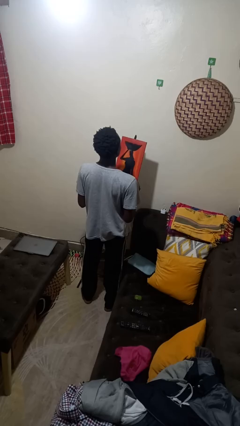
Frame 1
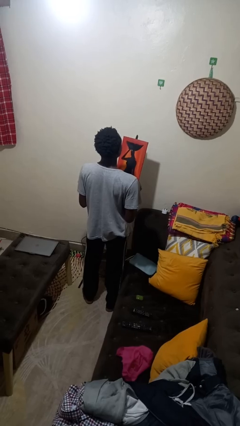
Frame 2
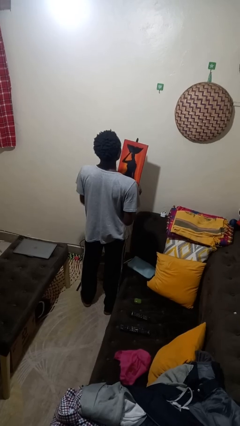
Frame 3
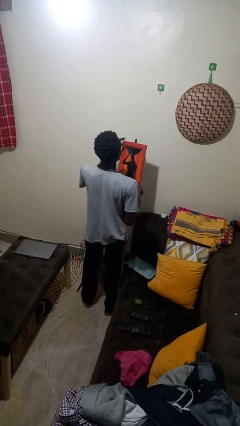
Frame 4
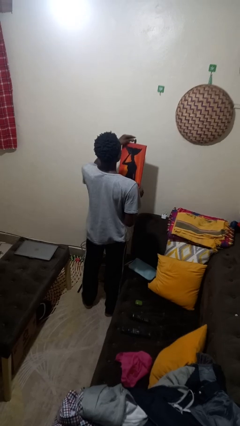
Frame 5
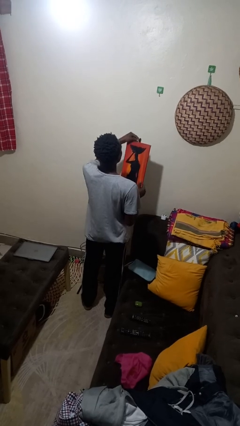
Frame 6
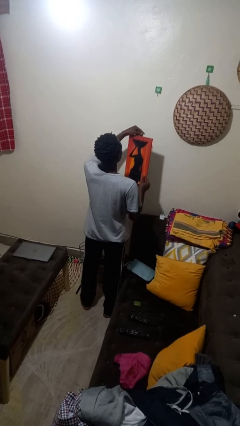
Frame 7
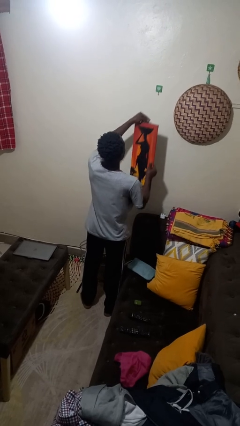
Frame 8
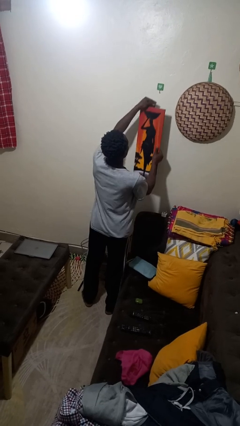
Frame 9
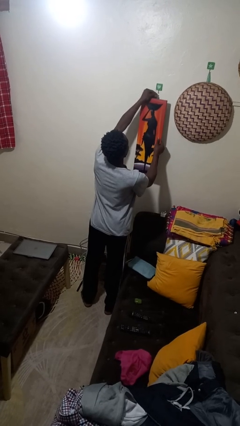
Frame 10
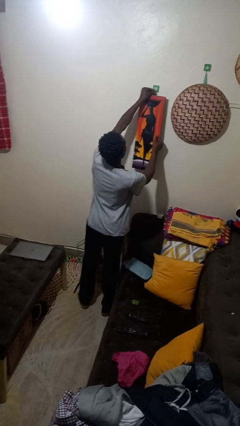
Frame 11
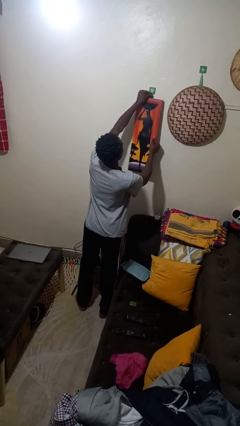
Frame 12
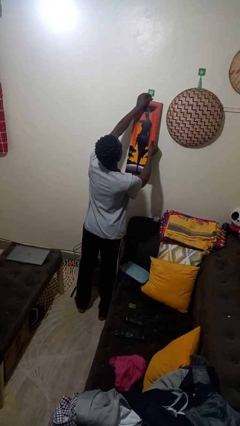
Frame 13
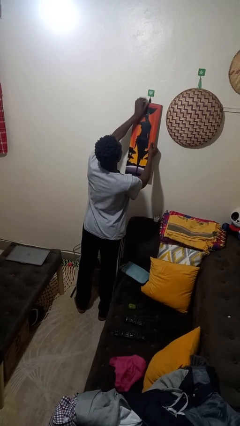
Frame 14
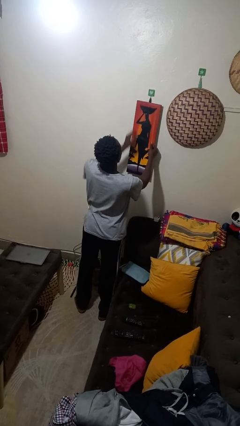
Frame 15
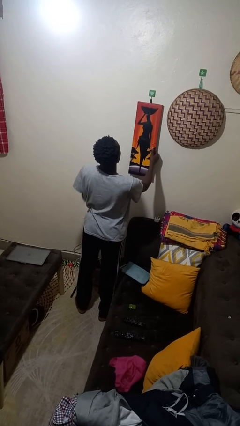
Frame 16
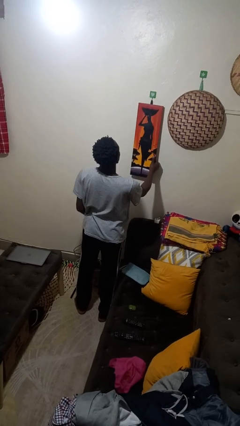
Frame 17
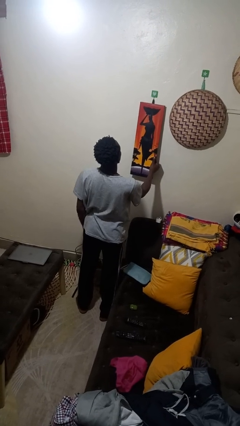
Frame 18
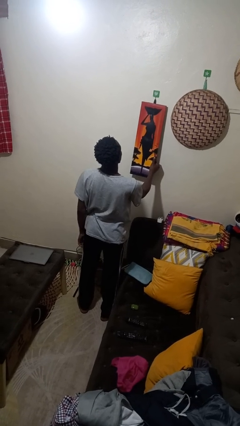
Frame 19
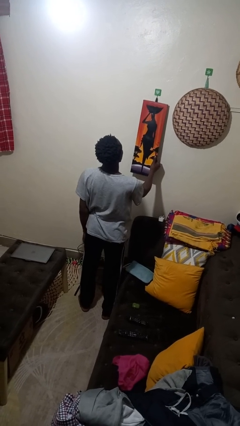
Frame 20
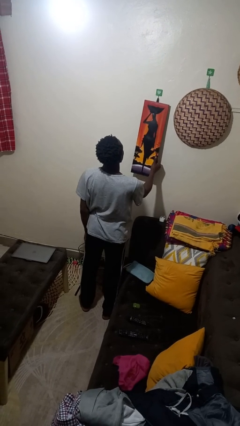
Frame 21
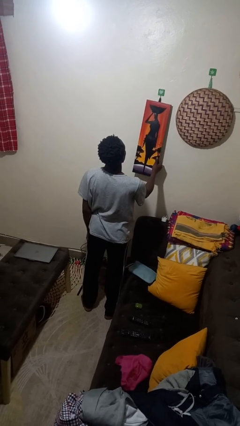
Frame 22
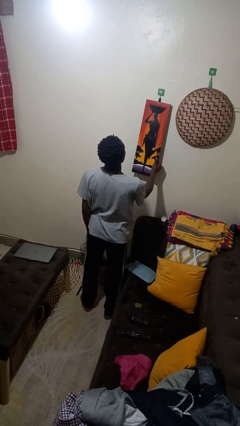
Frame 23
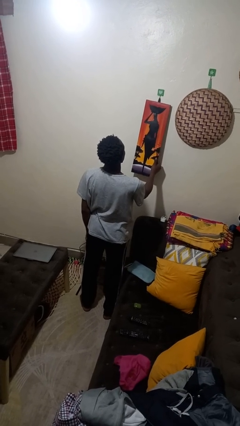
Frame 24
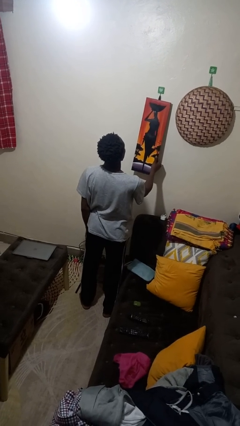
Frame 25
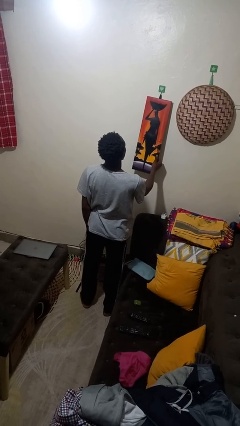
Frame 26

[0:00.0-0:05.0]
person puts up picture frame

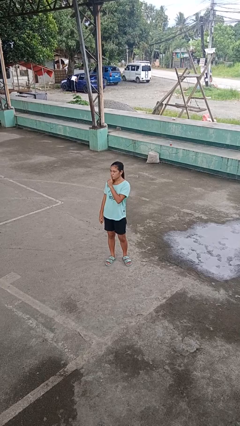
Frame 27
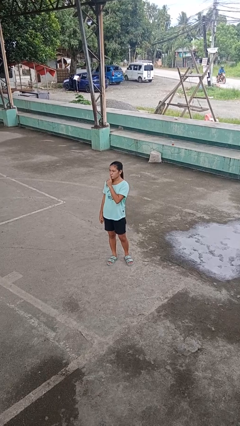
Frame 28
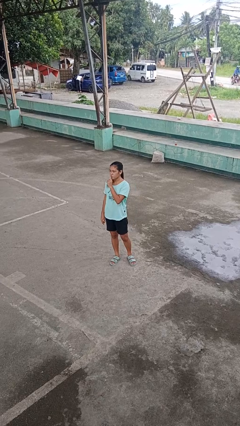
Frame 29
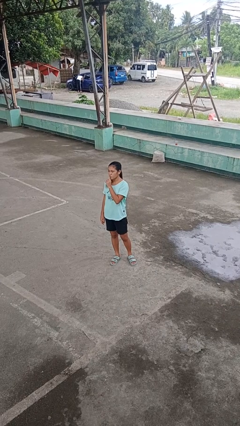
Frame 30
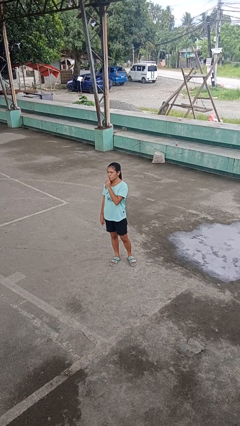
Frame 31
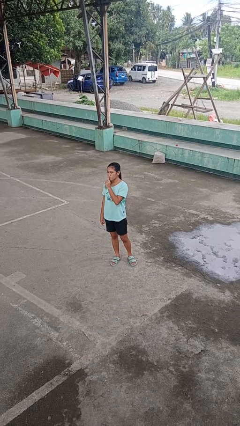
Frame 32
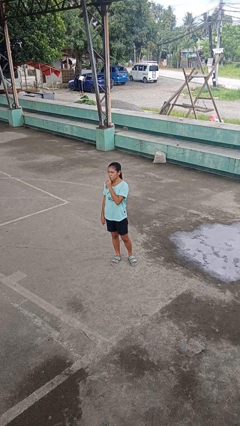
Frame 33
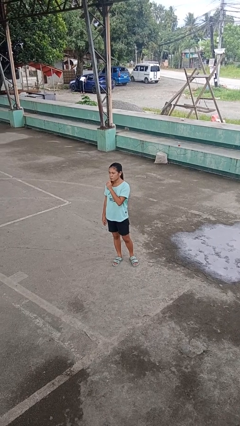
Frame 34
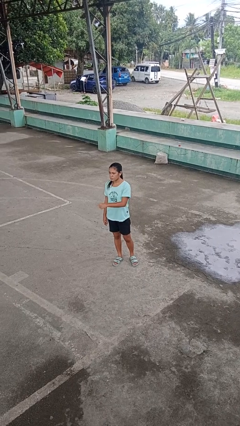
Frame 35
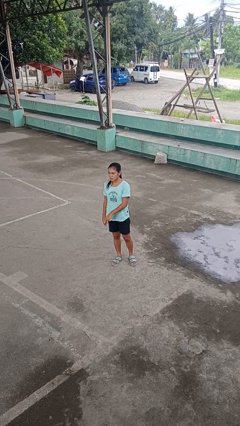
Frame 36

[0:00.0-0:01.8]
person gestures be quiet

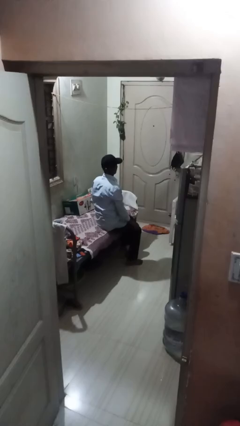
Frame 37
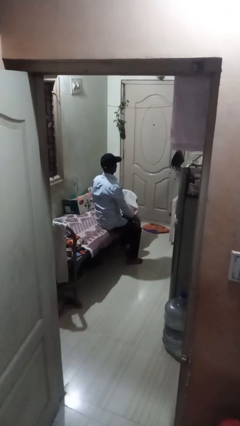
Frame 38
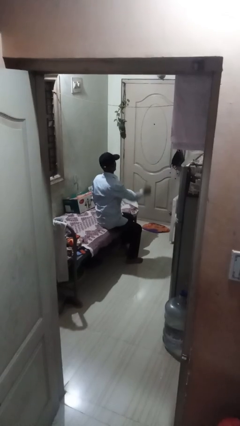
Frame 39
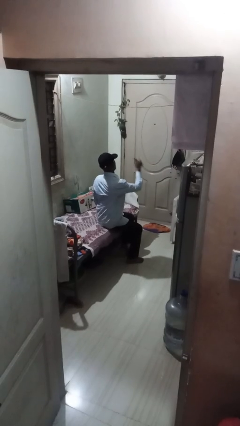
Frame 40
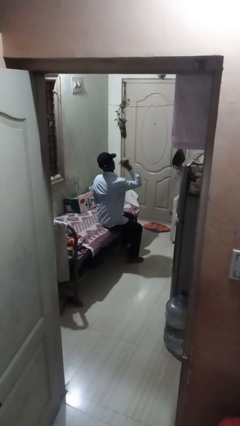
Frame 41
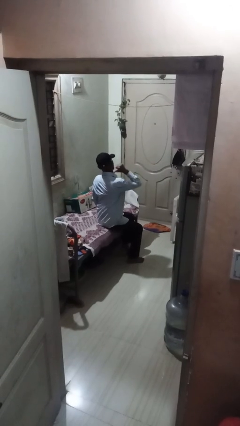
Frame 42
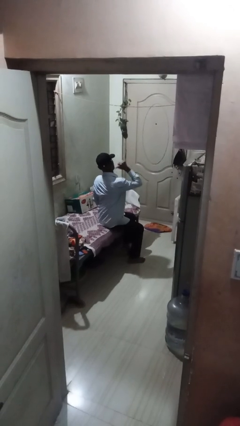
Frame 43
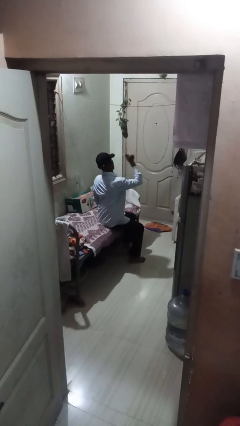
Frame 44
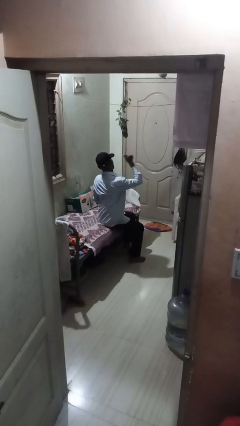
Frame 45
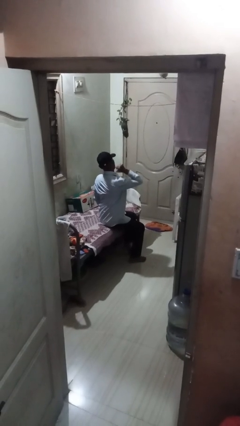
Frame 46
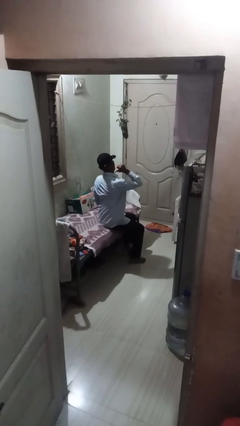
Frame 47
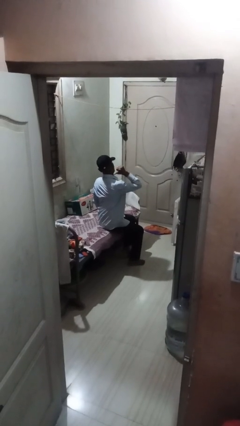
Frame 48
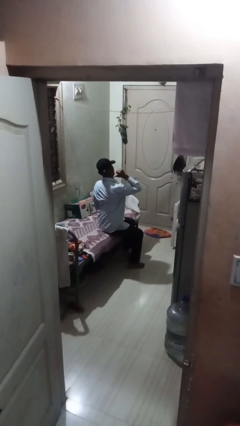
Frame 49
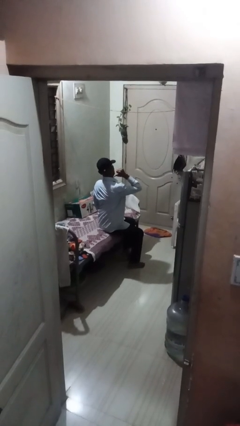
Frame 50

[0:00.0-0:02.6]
person gestures behind me

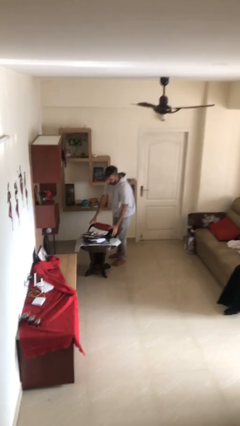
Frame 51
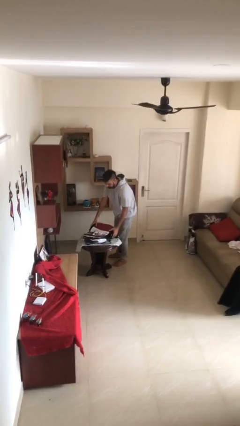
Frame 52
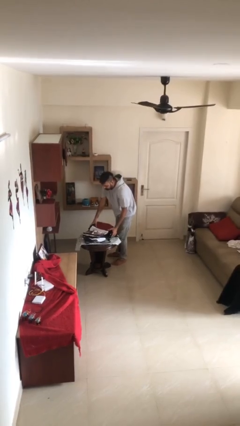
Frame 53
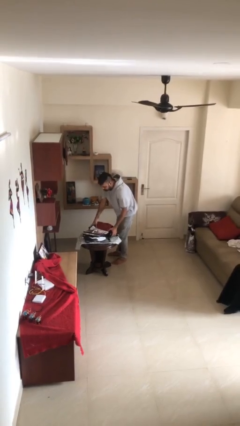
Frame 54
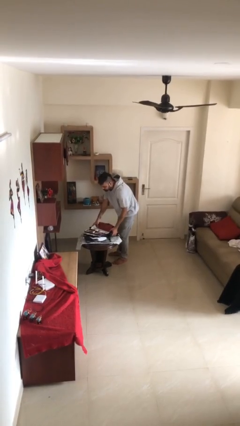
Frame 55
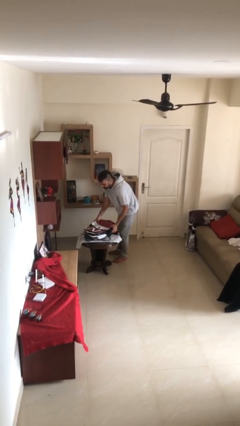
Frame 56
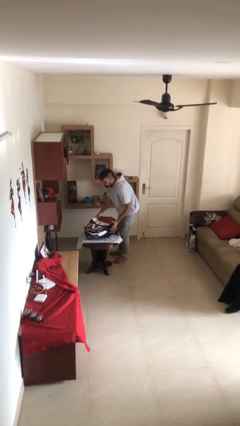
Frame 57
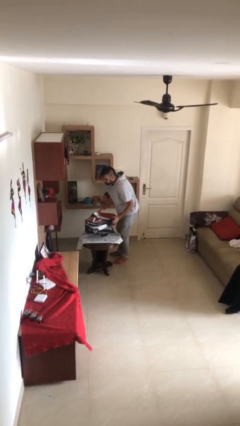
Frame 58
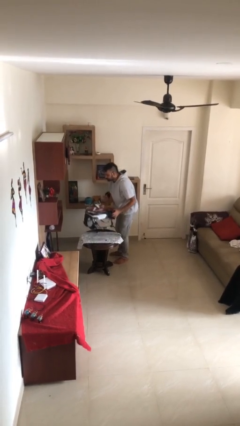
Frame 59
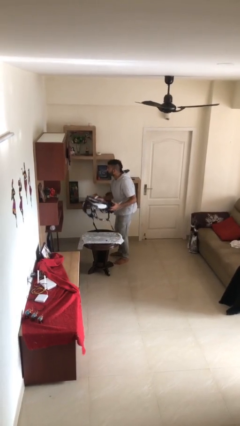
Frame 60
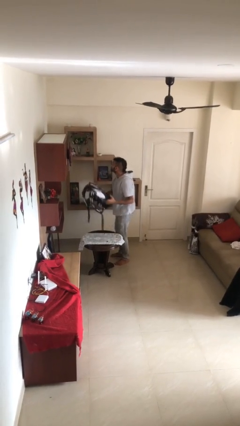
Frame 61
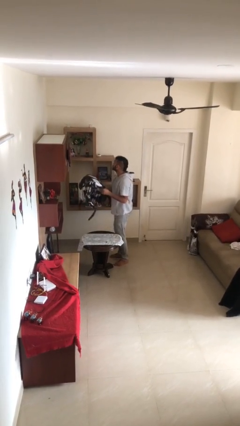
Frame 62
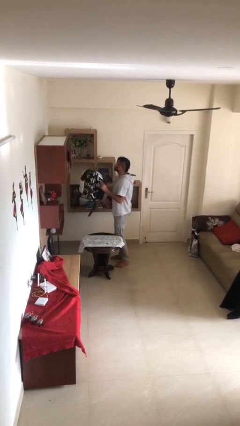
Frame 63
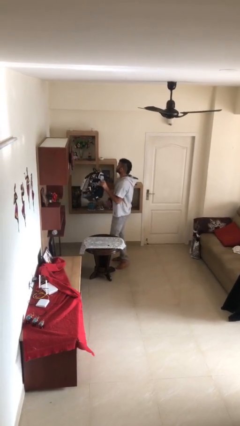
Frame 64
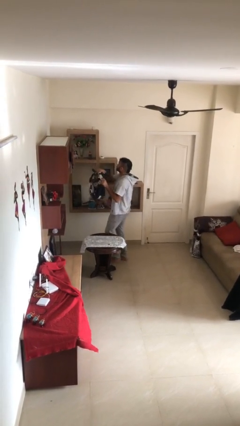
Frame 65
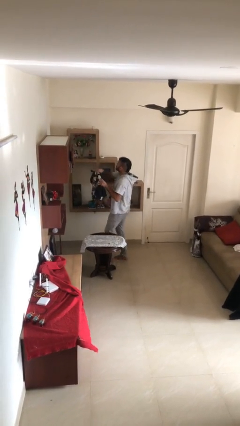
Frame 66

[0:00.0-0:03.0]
person picks up object from table

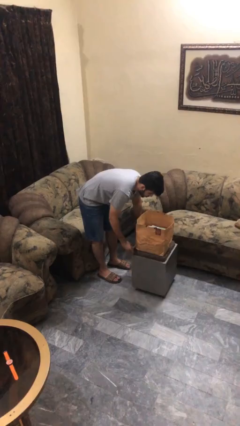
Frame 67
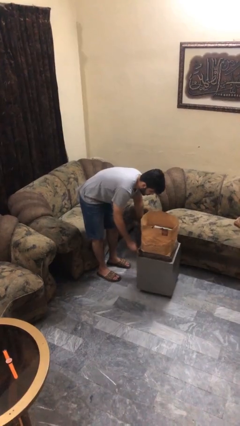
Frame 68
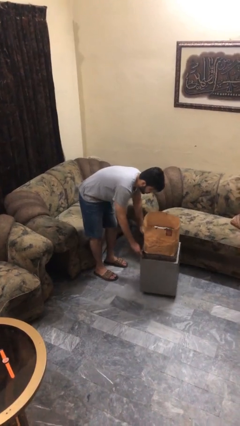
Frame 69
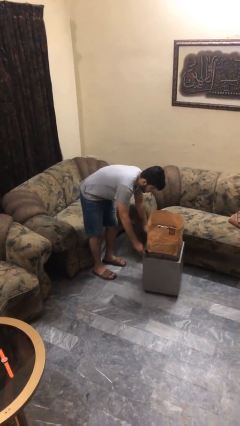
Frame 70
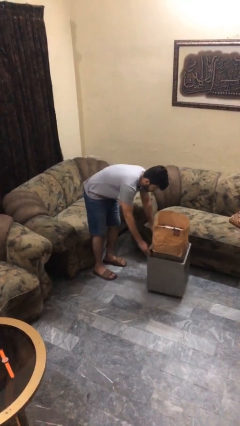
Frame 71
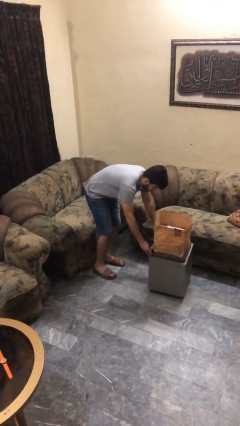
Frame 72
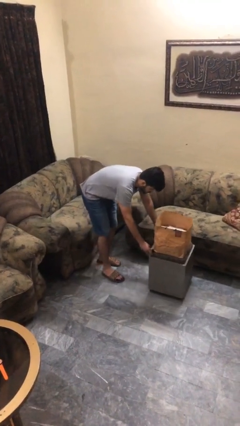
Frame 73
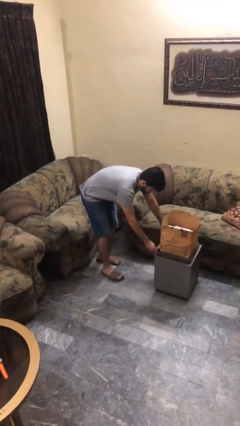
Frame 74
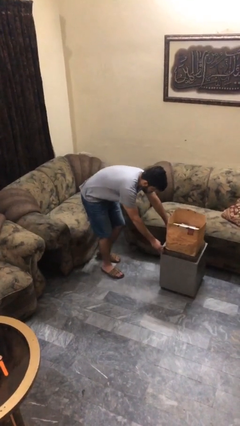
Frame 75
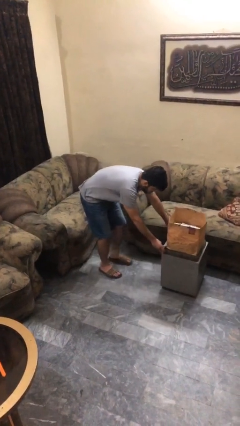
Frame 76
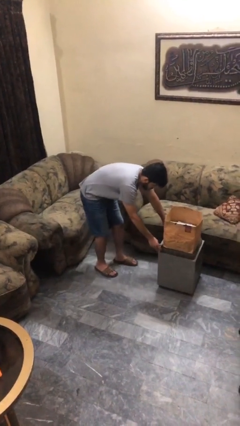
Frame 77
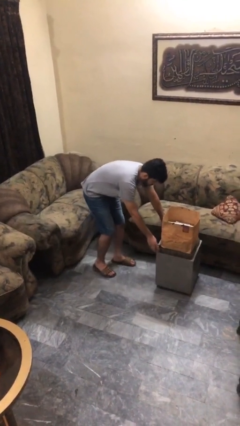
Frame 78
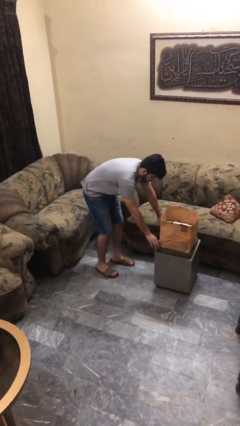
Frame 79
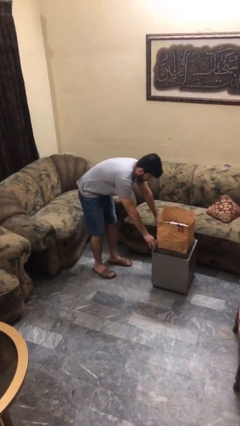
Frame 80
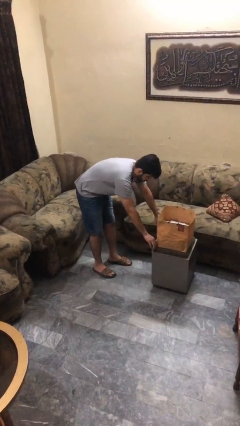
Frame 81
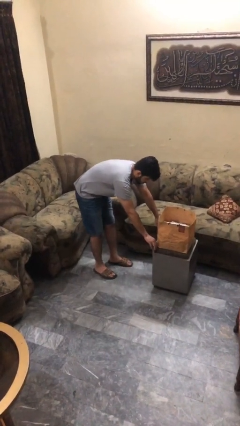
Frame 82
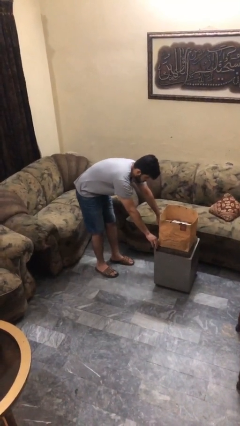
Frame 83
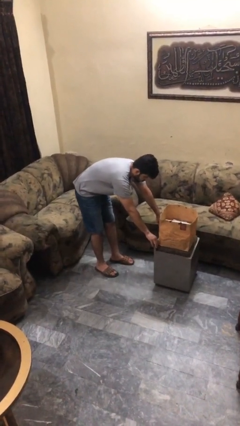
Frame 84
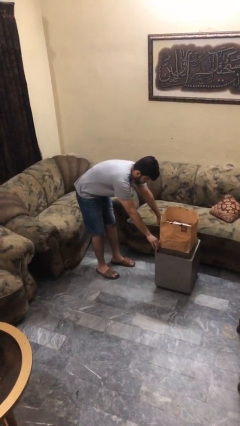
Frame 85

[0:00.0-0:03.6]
person pushes wheeled cart

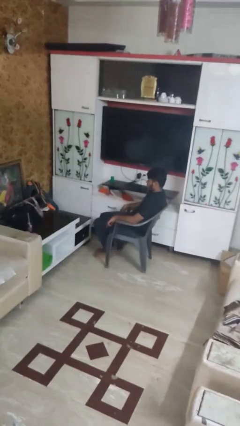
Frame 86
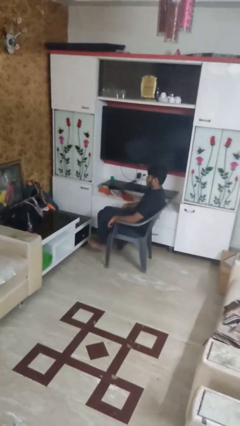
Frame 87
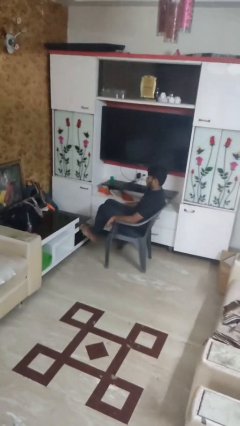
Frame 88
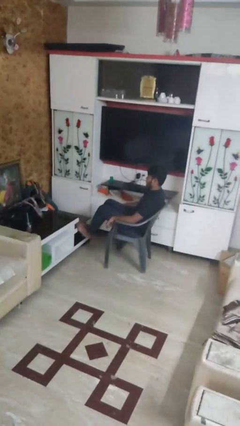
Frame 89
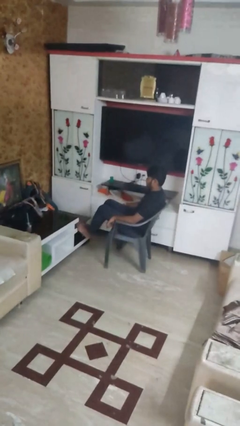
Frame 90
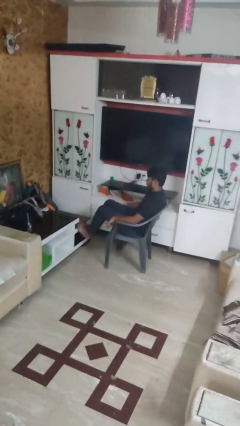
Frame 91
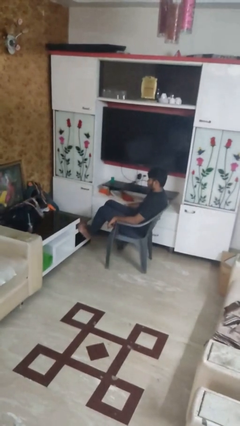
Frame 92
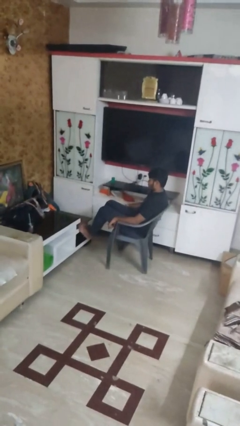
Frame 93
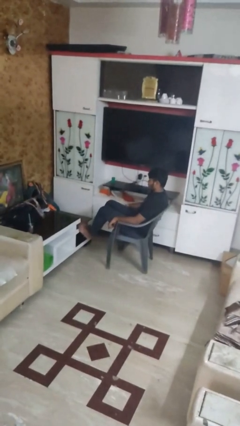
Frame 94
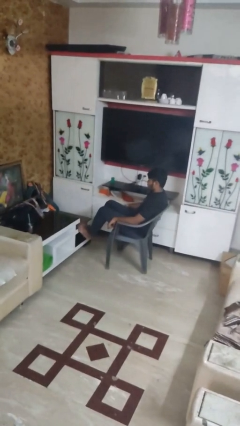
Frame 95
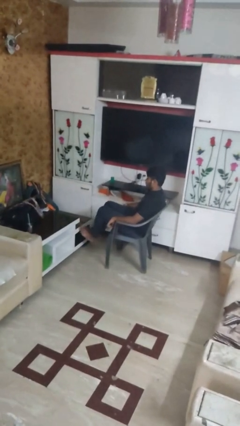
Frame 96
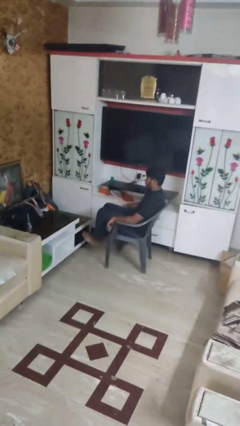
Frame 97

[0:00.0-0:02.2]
person puts feet up
